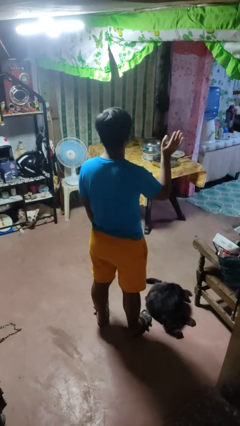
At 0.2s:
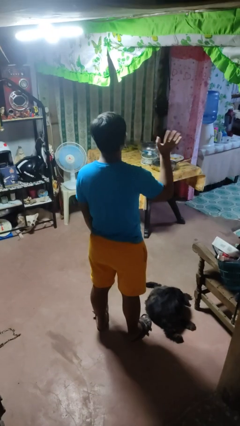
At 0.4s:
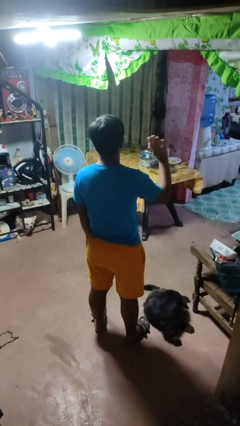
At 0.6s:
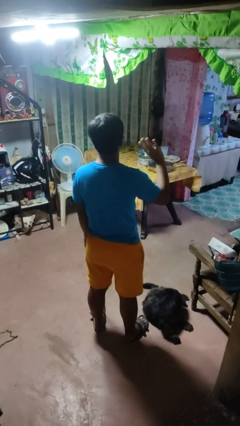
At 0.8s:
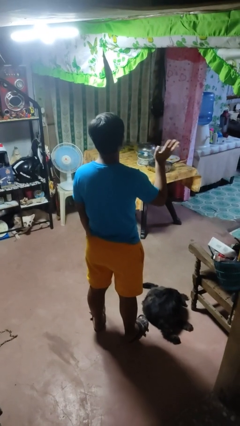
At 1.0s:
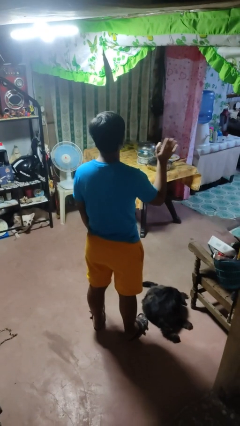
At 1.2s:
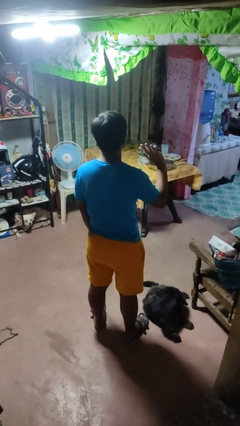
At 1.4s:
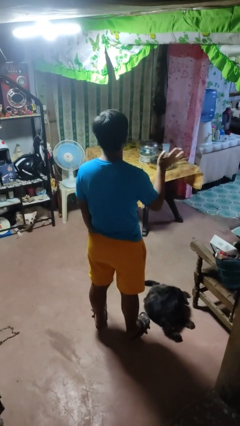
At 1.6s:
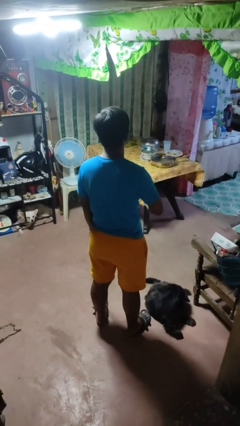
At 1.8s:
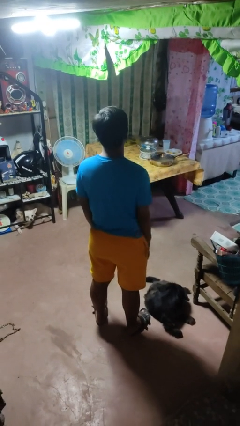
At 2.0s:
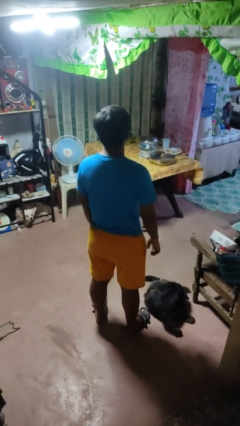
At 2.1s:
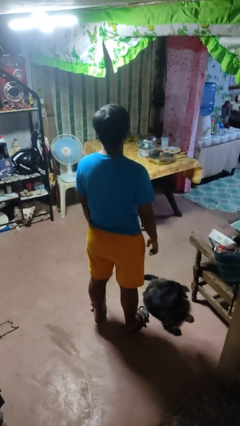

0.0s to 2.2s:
person waves at person

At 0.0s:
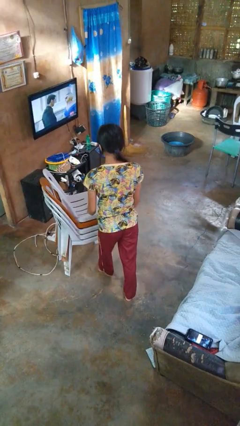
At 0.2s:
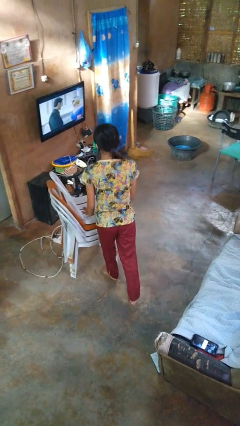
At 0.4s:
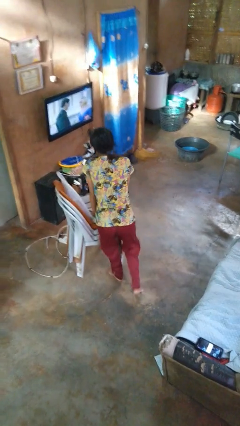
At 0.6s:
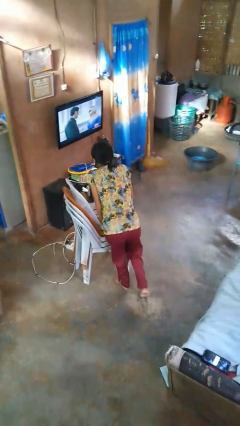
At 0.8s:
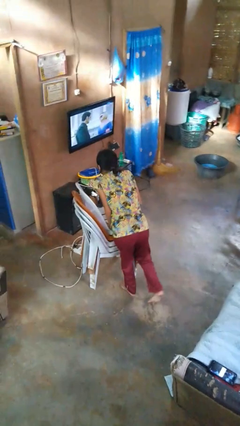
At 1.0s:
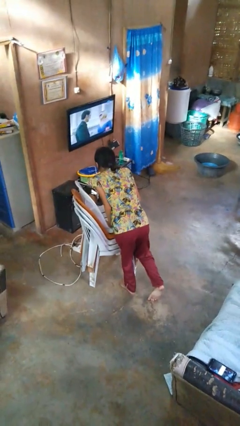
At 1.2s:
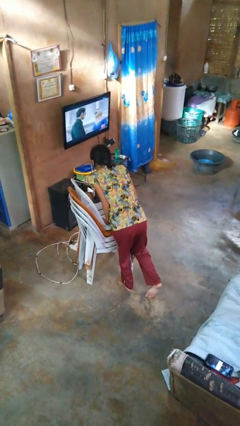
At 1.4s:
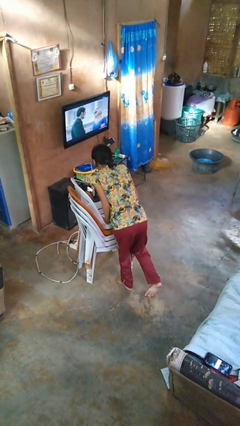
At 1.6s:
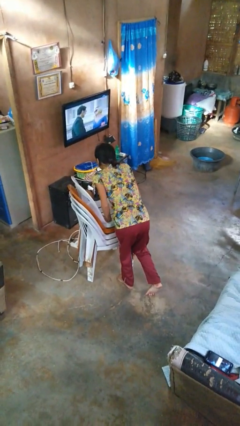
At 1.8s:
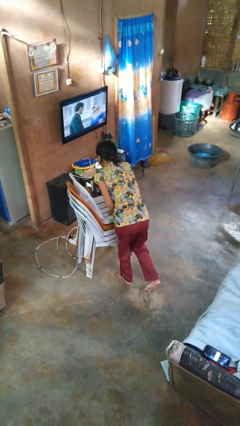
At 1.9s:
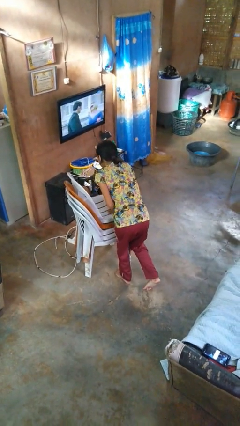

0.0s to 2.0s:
person trips on object on floor

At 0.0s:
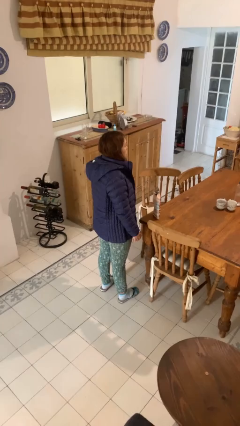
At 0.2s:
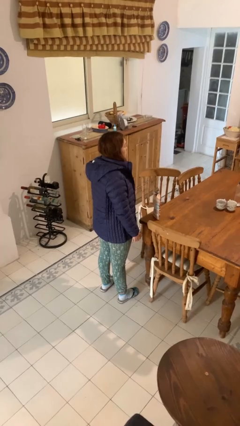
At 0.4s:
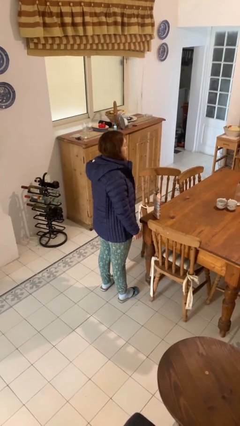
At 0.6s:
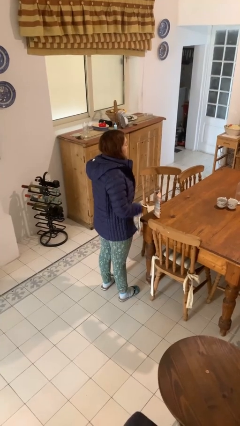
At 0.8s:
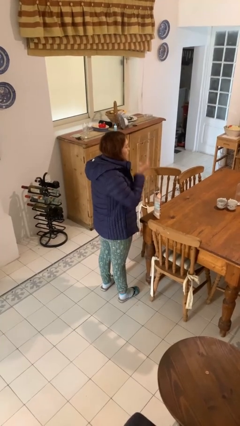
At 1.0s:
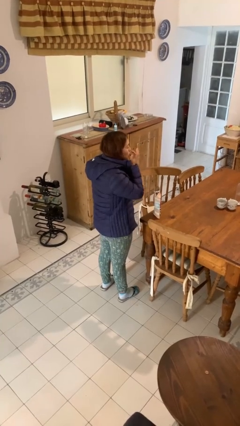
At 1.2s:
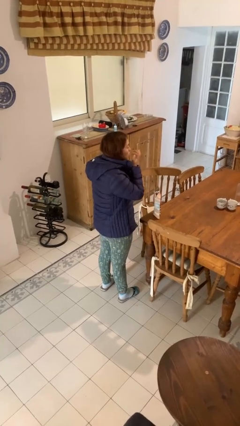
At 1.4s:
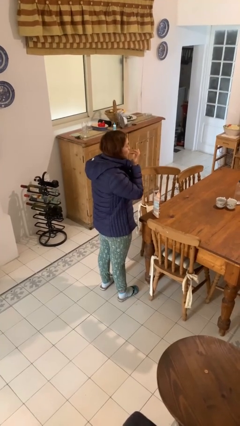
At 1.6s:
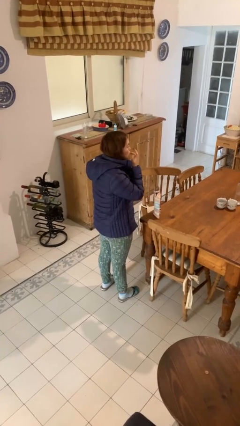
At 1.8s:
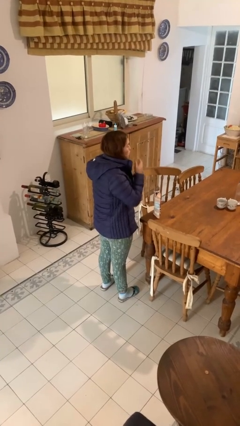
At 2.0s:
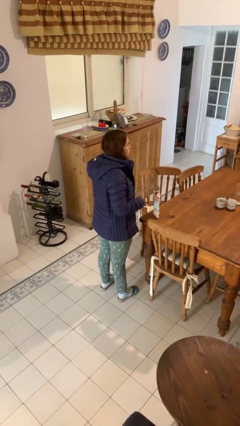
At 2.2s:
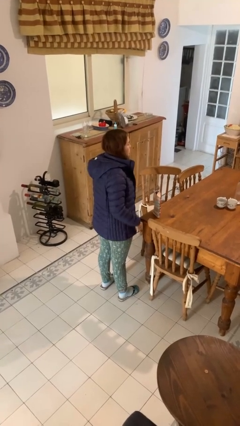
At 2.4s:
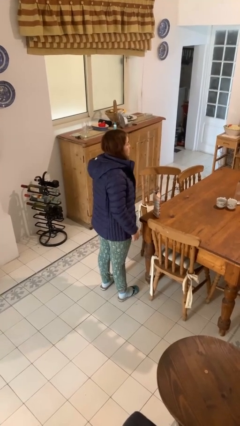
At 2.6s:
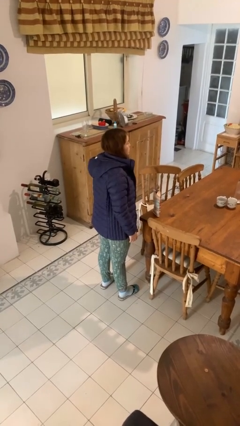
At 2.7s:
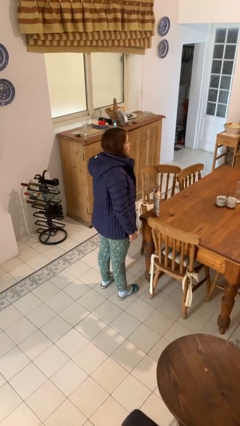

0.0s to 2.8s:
person licks fingers

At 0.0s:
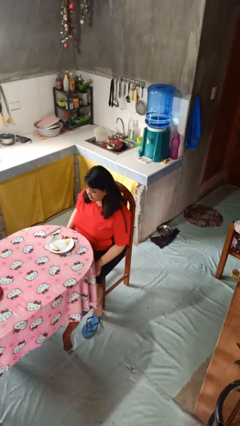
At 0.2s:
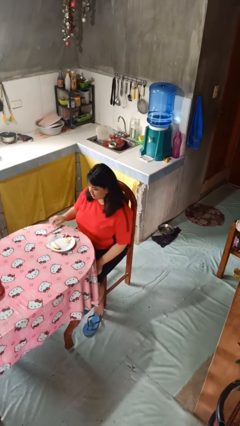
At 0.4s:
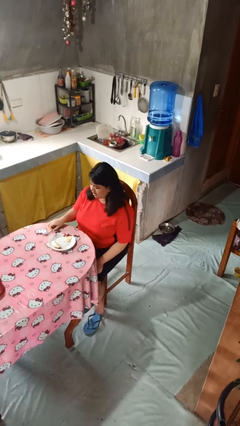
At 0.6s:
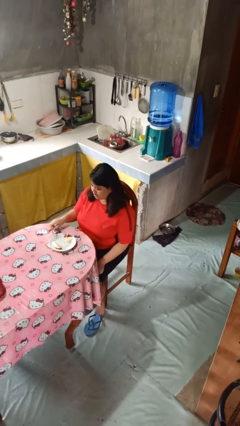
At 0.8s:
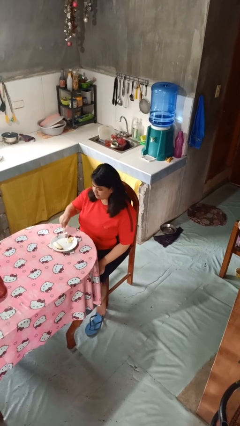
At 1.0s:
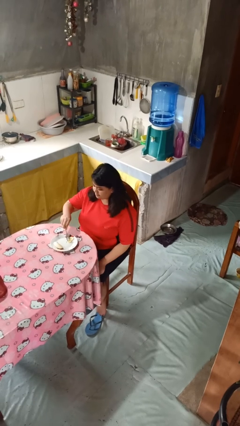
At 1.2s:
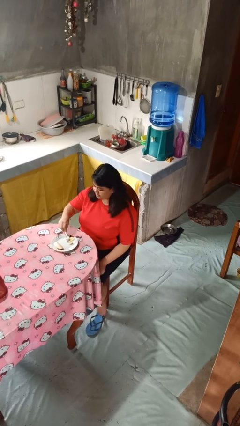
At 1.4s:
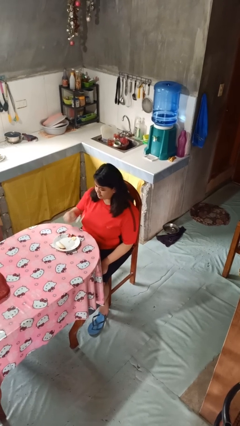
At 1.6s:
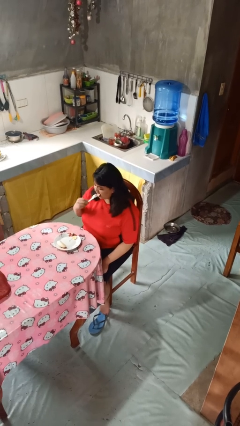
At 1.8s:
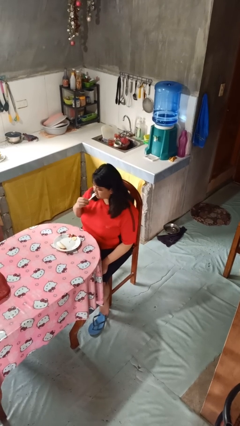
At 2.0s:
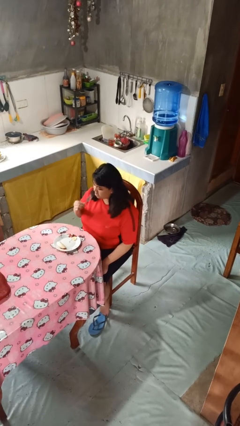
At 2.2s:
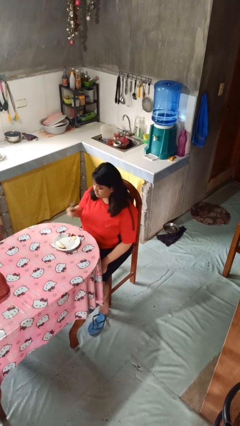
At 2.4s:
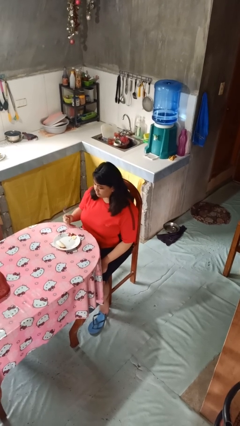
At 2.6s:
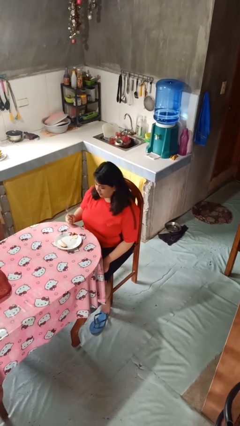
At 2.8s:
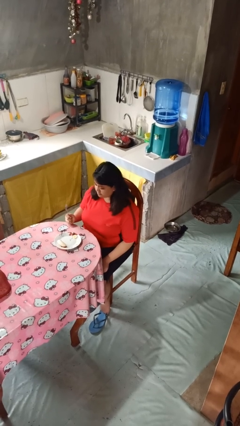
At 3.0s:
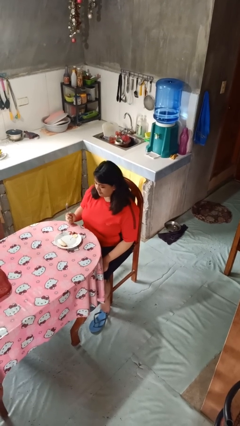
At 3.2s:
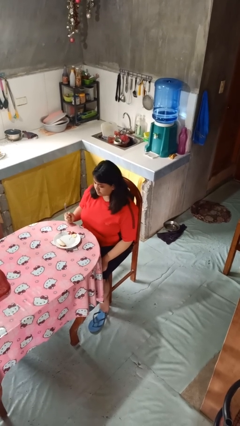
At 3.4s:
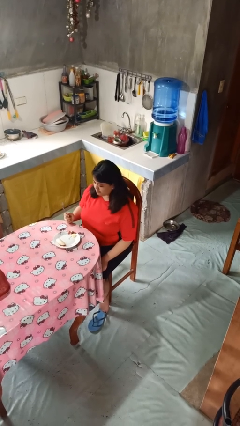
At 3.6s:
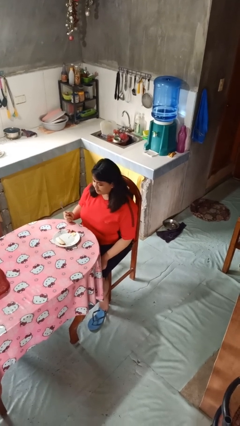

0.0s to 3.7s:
person eats with utensil

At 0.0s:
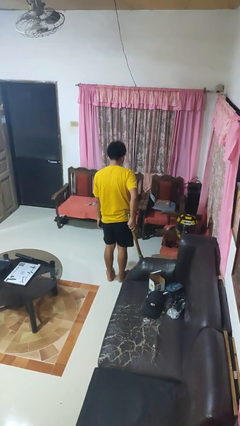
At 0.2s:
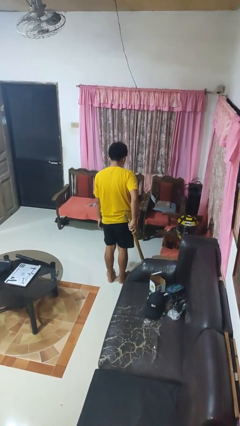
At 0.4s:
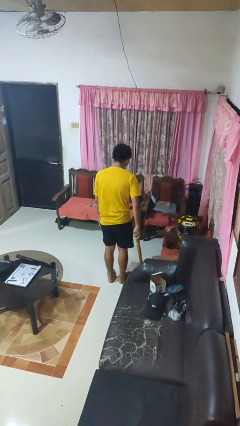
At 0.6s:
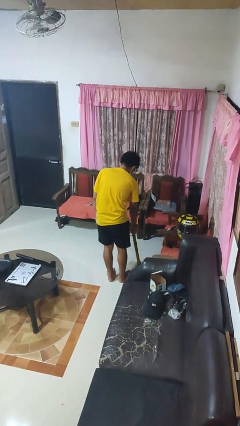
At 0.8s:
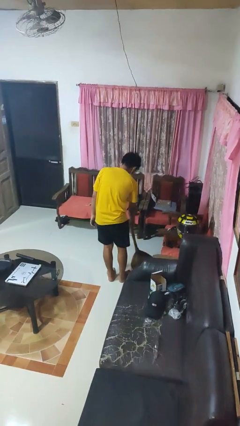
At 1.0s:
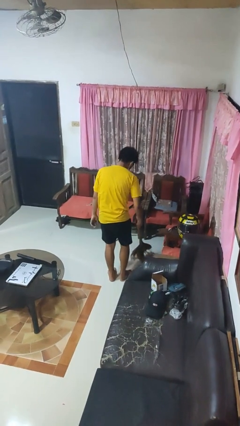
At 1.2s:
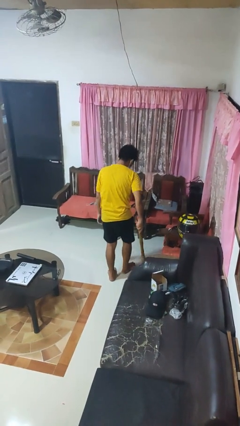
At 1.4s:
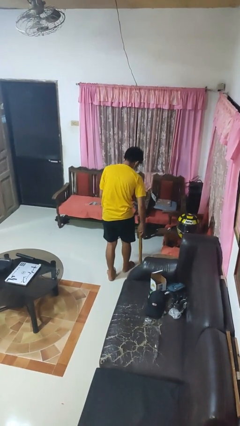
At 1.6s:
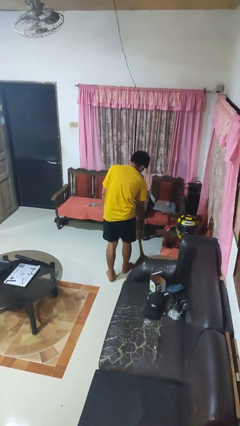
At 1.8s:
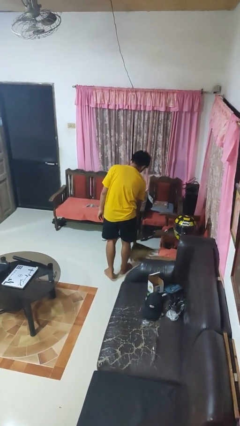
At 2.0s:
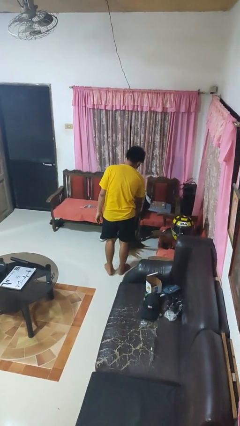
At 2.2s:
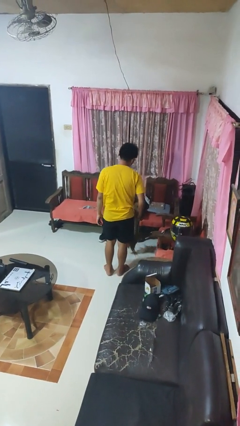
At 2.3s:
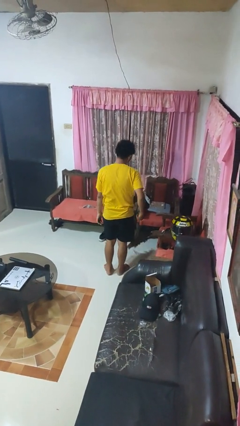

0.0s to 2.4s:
person sweeps floor

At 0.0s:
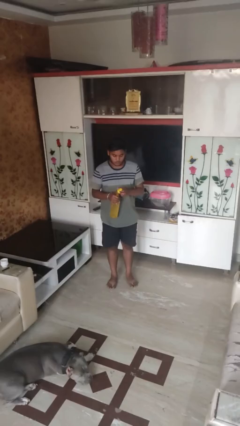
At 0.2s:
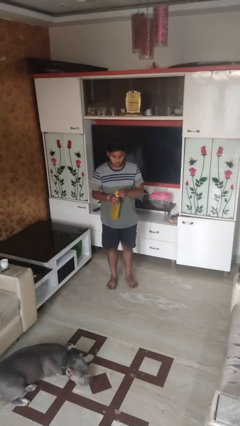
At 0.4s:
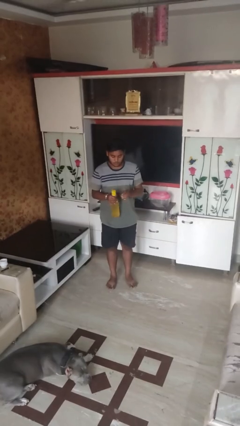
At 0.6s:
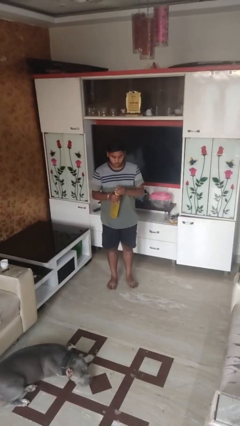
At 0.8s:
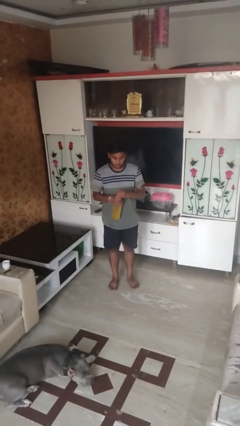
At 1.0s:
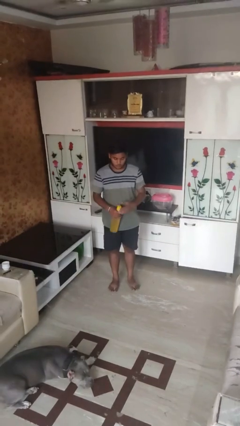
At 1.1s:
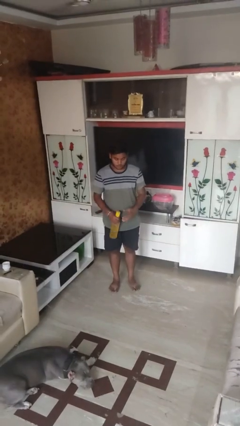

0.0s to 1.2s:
person screws lid to bottle

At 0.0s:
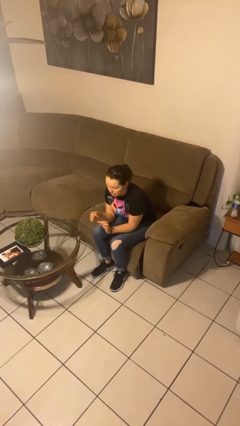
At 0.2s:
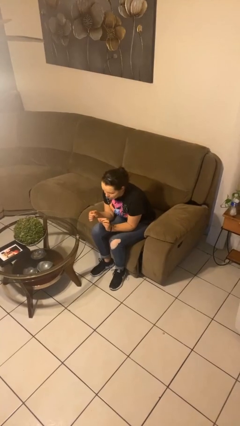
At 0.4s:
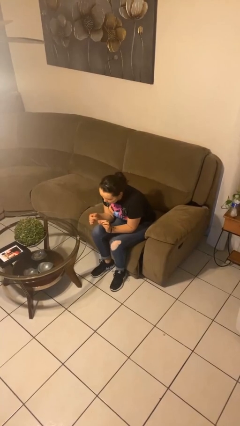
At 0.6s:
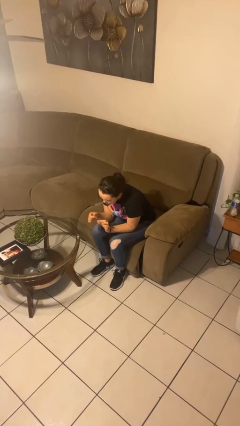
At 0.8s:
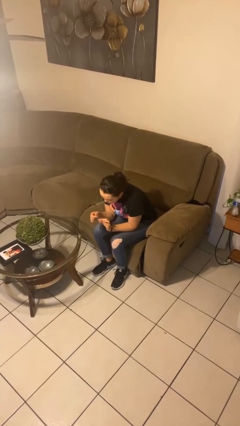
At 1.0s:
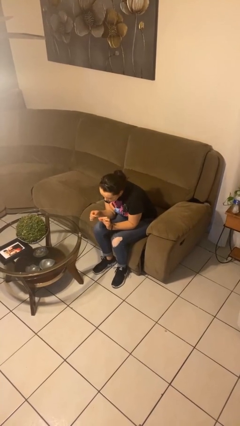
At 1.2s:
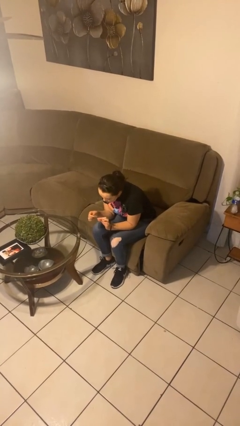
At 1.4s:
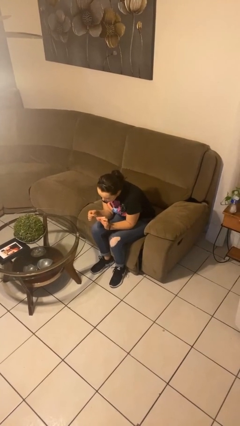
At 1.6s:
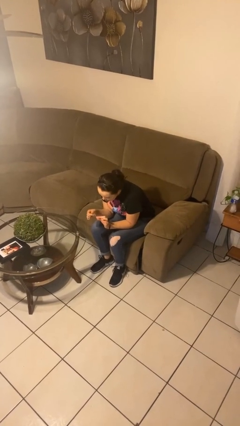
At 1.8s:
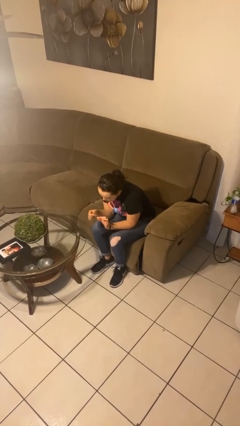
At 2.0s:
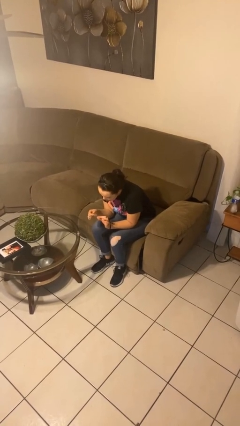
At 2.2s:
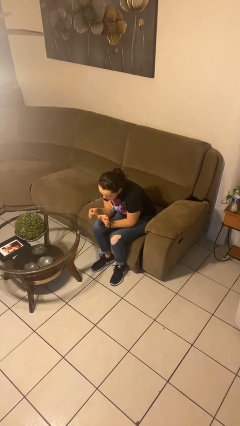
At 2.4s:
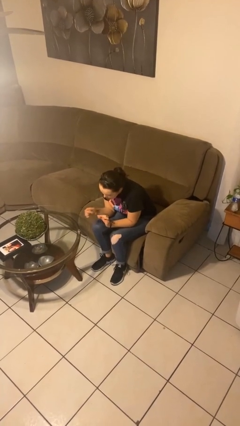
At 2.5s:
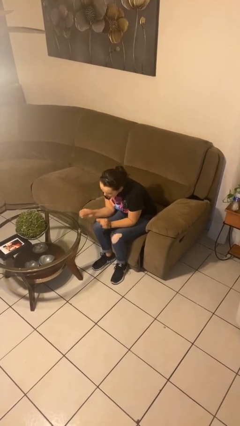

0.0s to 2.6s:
person paints fingernails

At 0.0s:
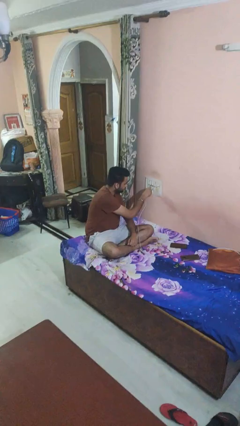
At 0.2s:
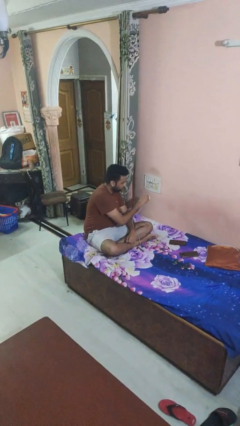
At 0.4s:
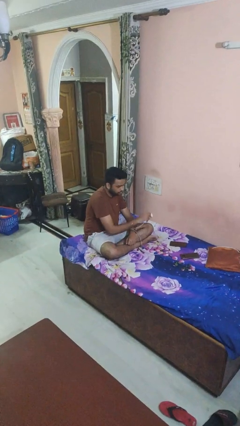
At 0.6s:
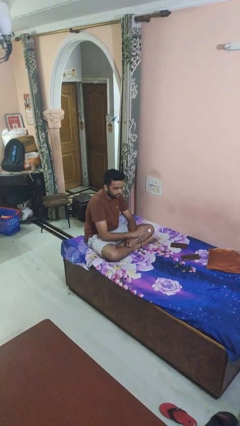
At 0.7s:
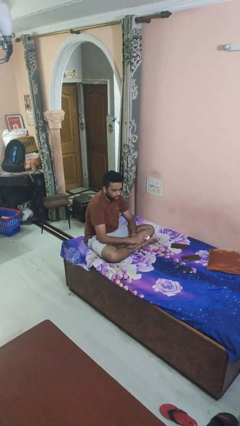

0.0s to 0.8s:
person unplugs from electrical socket
